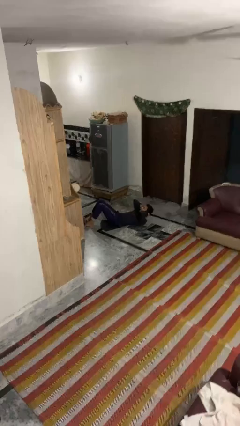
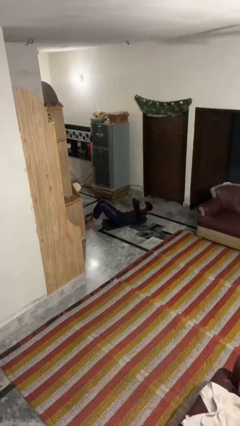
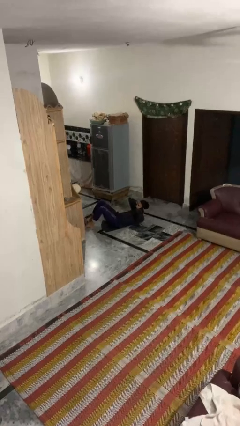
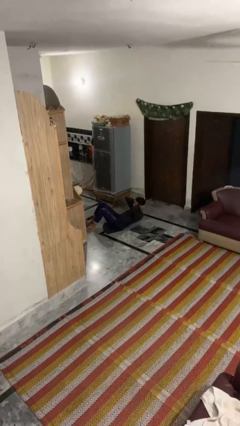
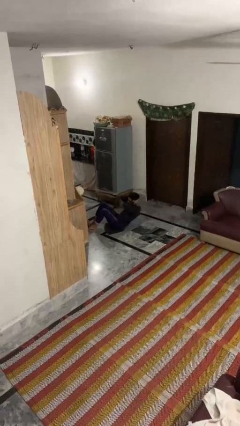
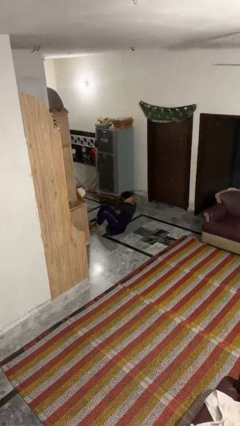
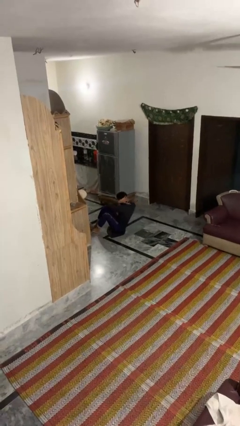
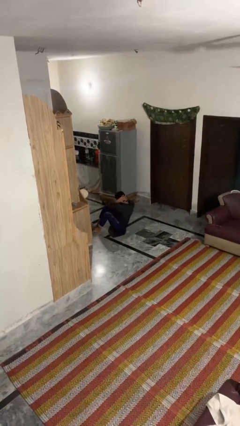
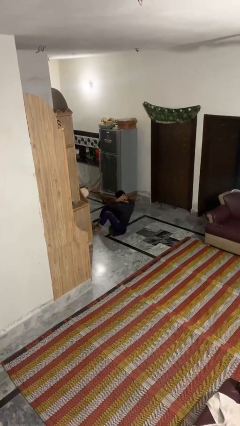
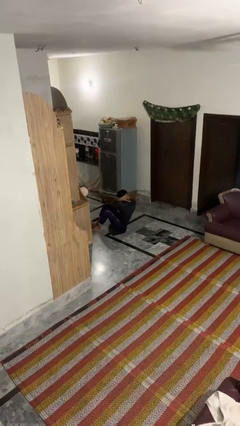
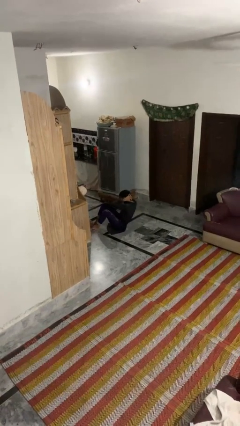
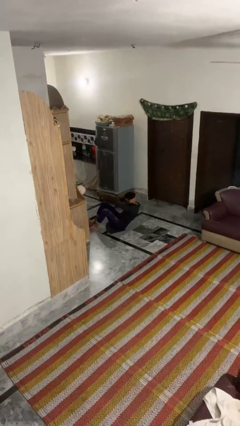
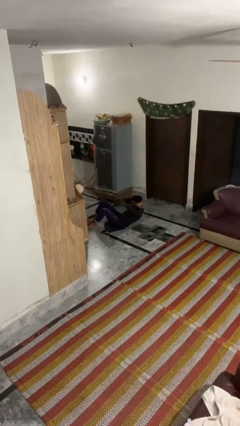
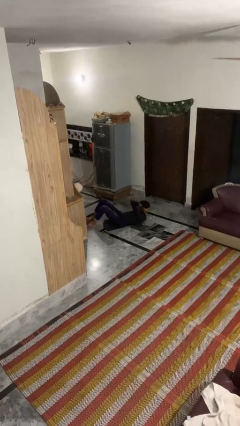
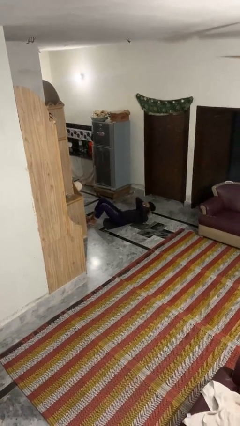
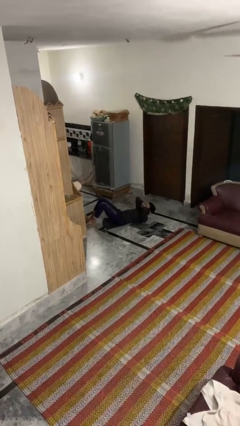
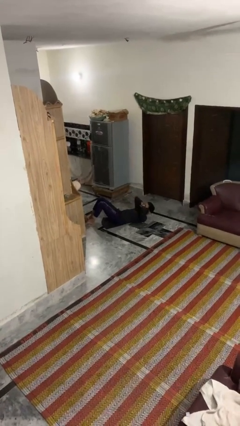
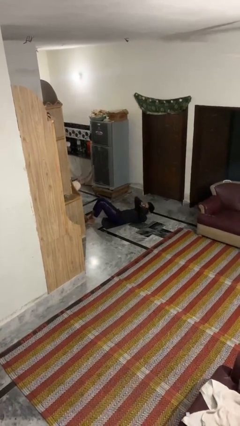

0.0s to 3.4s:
person exercises with situp

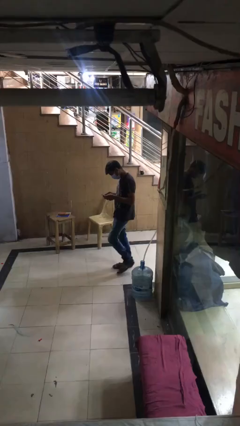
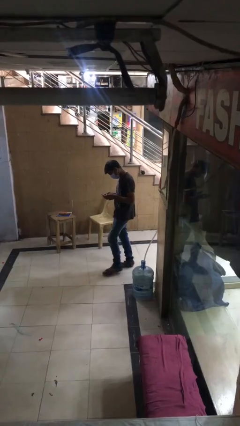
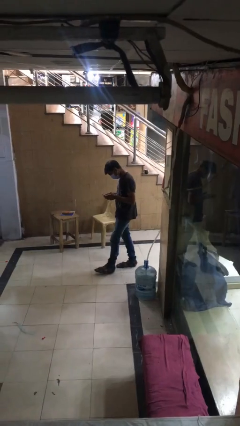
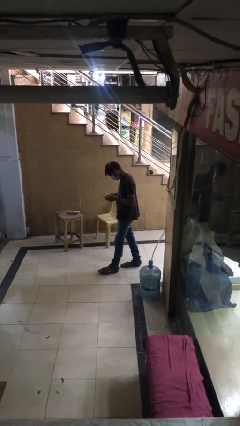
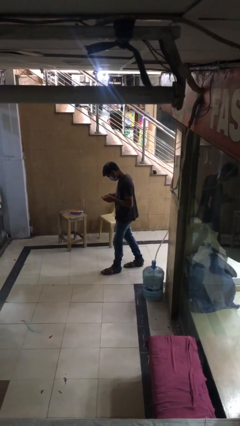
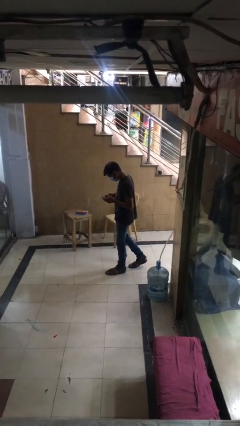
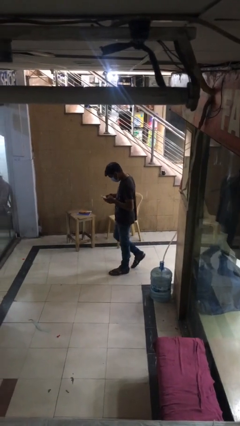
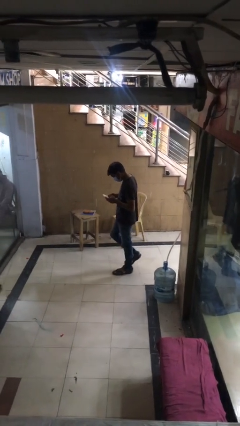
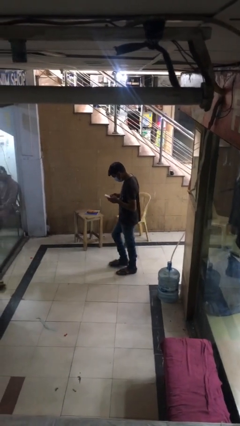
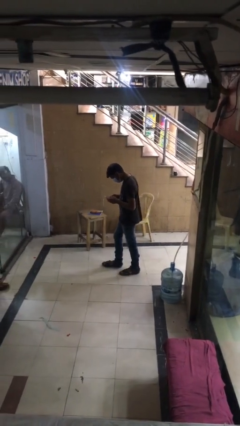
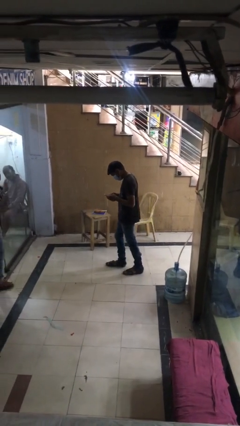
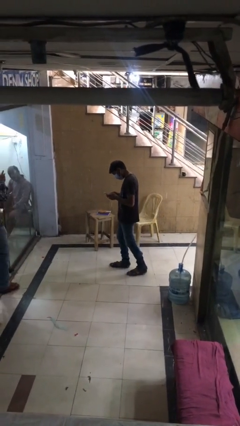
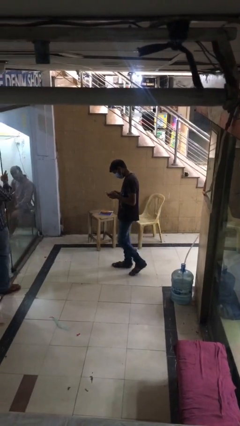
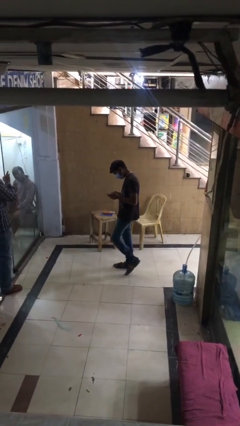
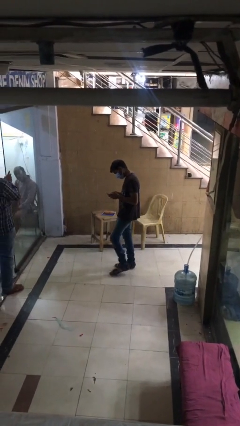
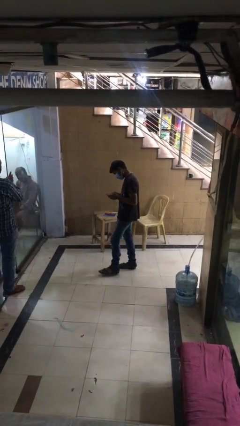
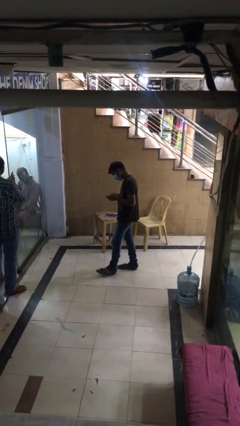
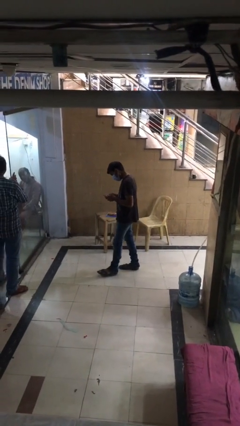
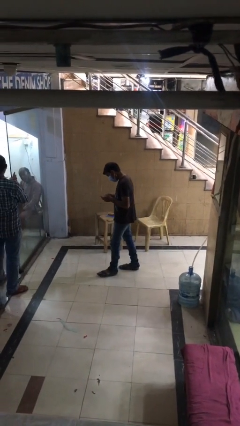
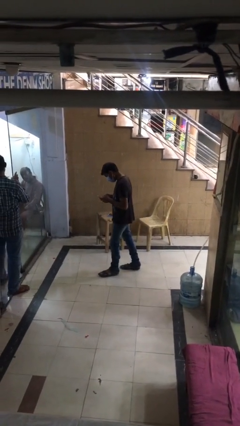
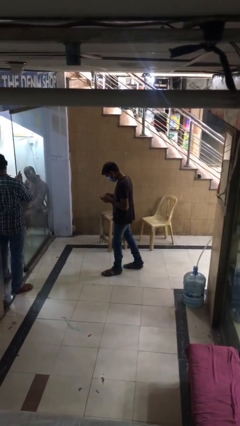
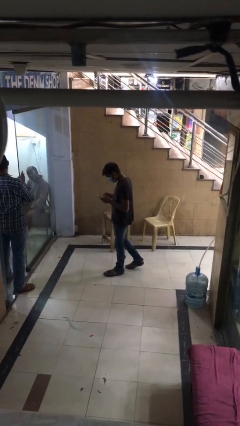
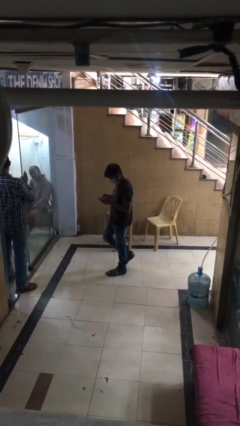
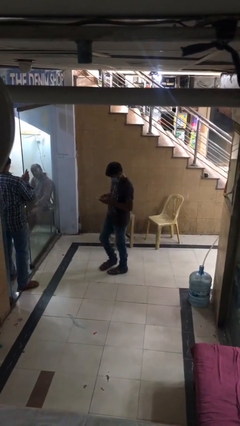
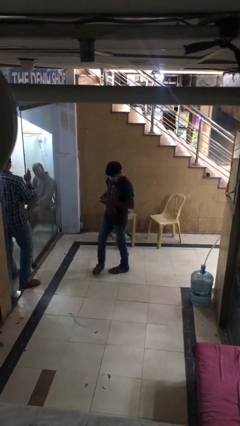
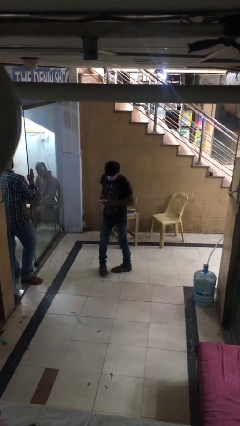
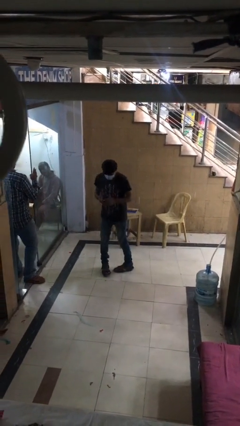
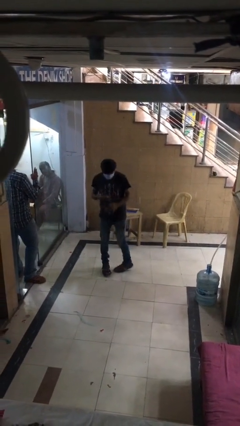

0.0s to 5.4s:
person texts on phone

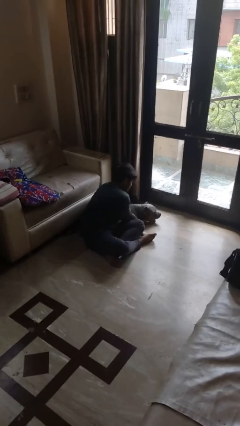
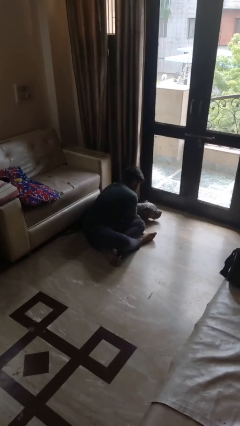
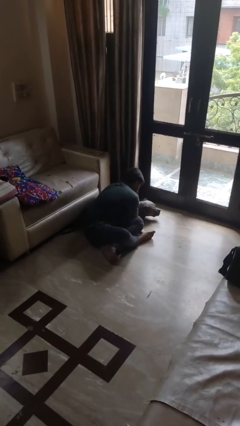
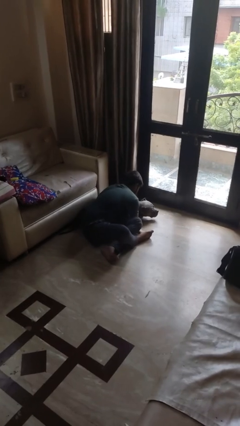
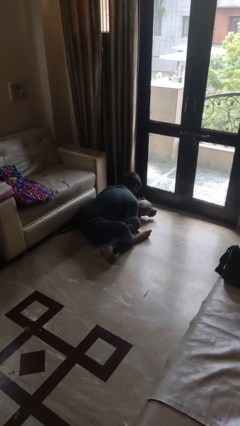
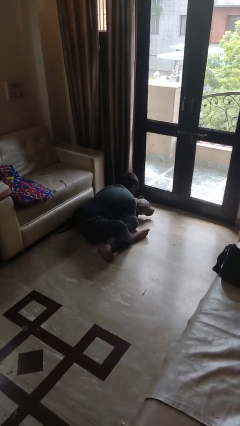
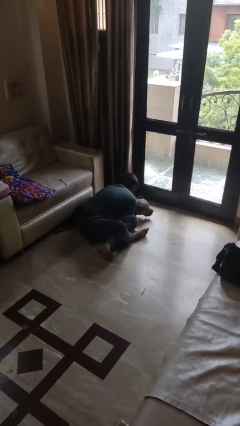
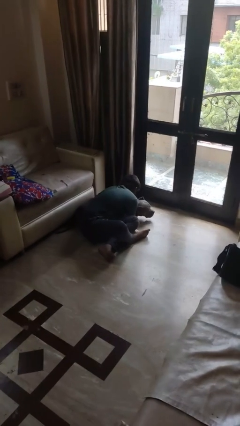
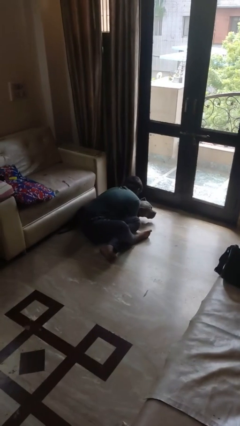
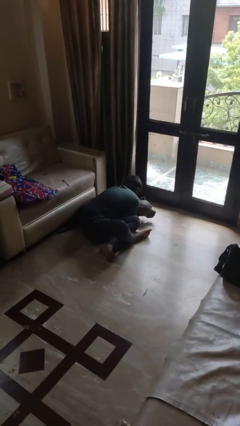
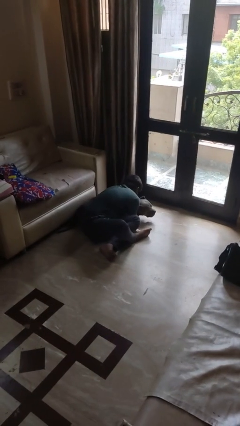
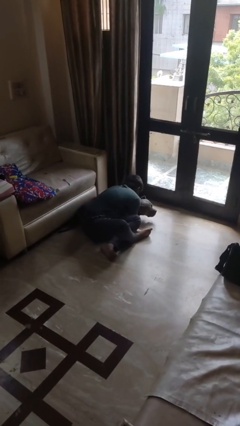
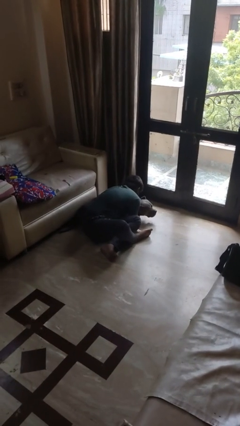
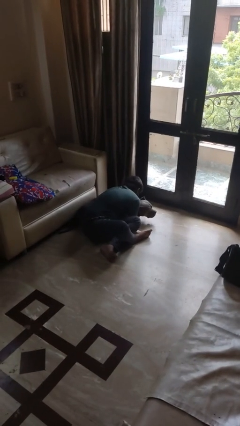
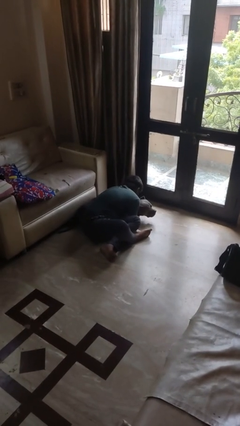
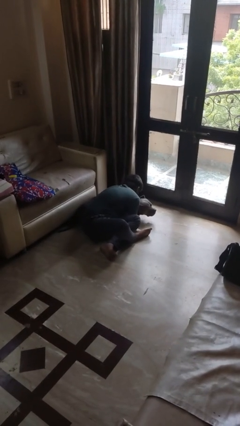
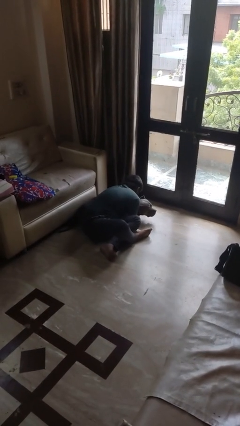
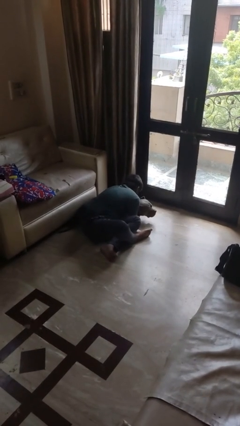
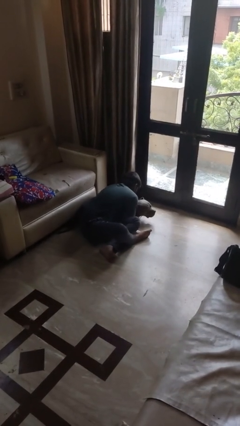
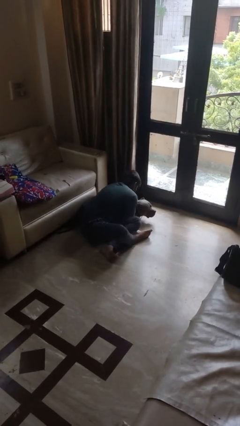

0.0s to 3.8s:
person hugs dog

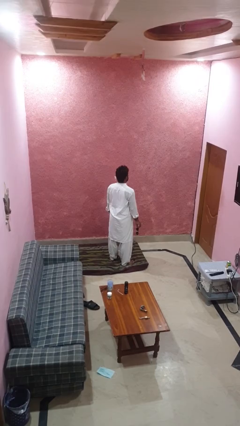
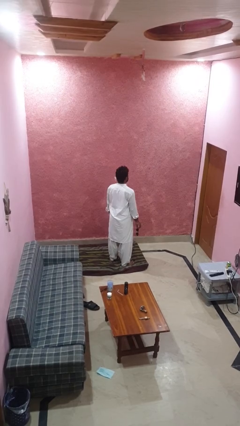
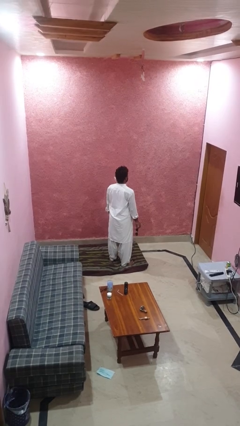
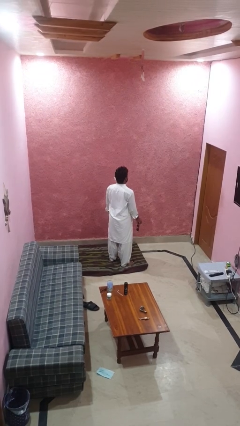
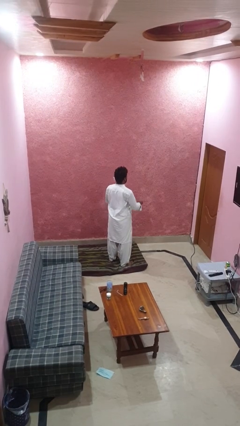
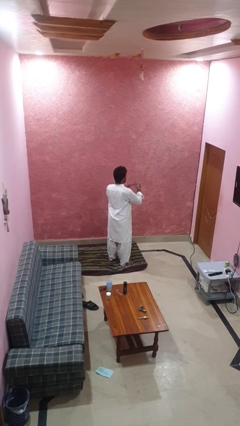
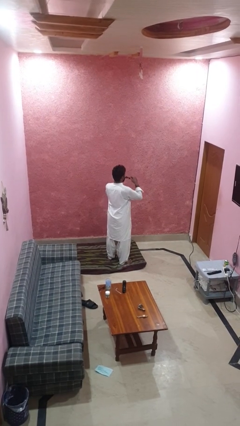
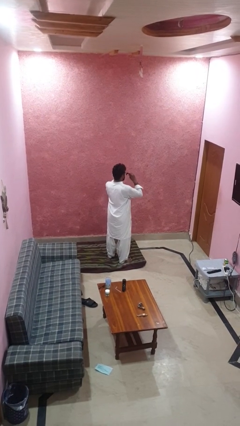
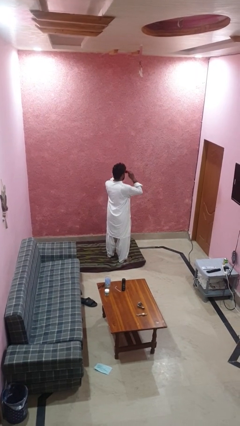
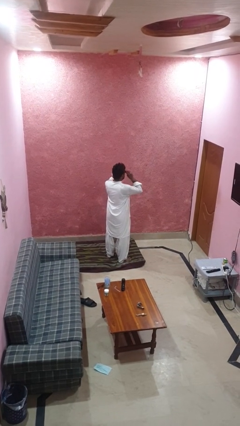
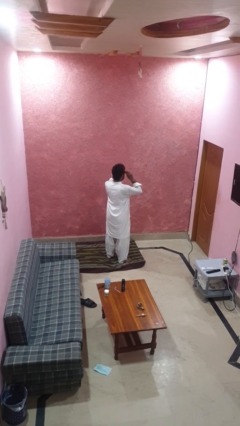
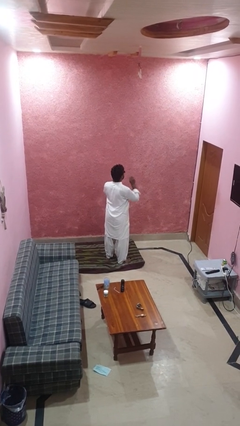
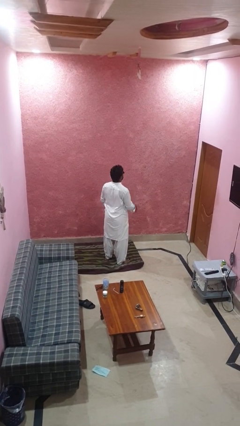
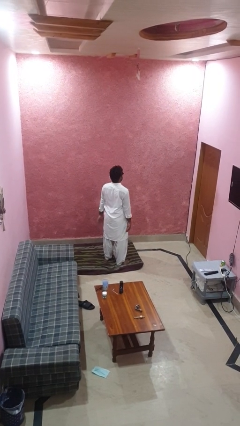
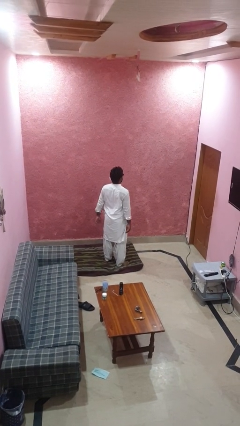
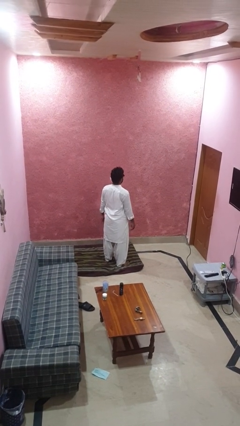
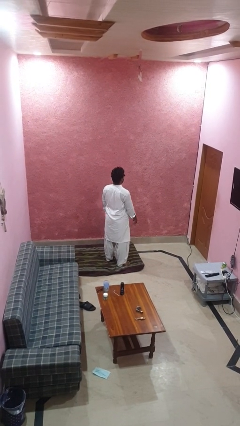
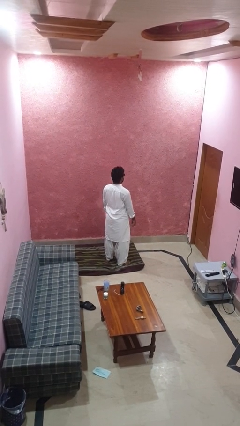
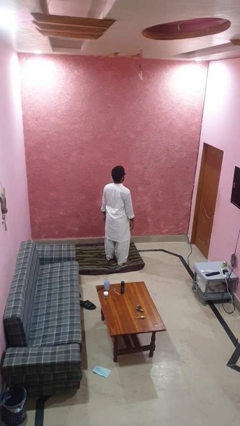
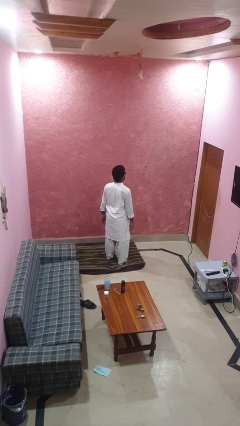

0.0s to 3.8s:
person puts on sunglasses

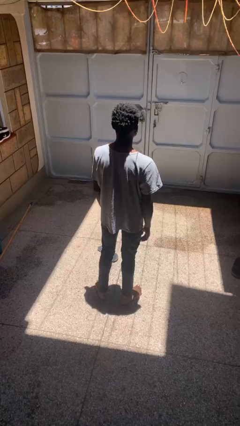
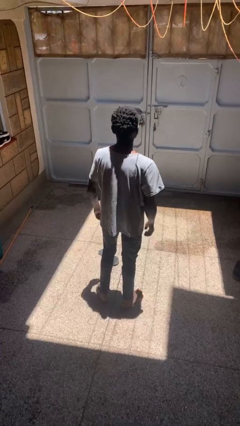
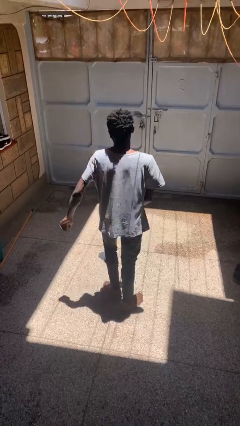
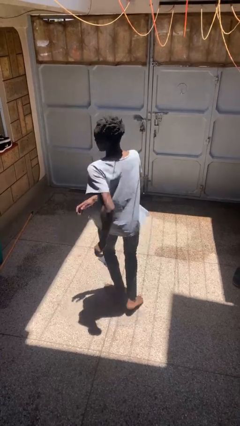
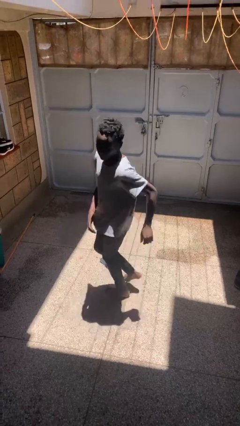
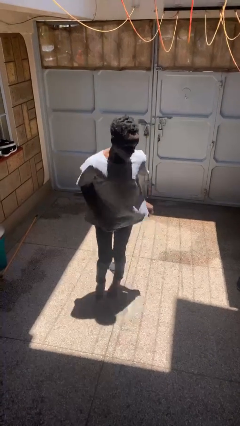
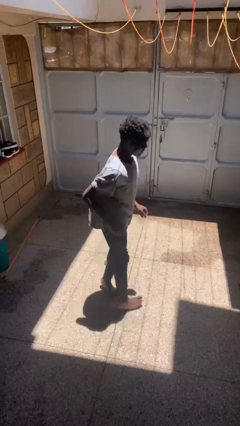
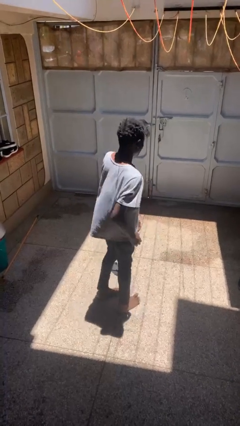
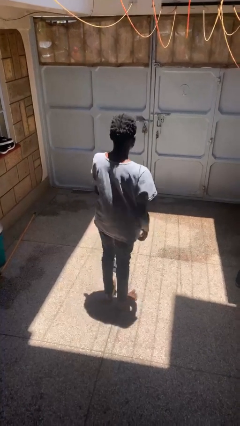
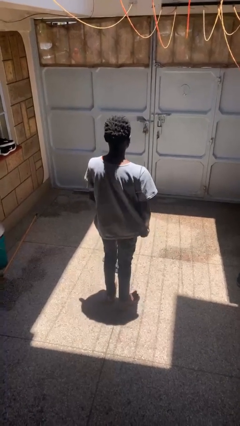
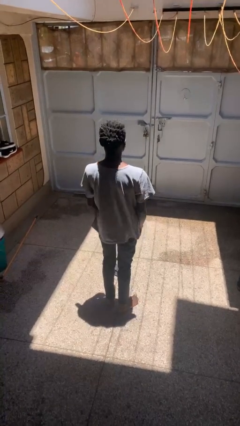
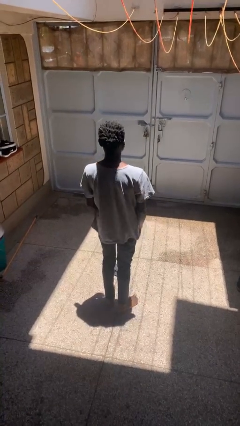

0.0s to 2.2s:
person twirls
